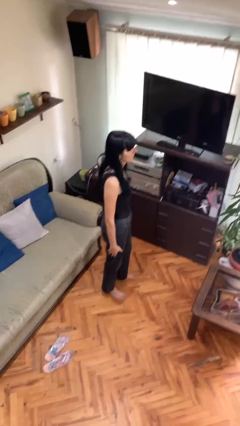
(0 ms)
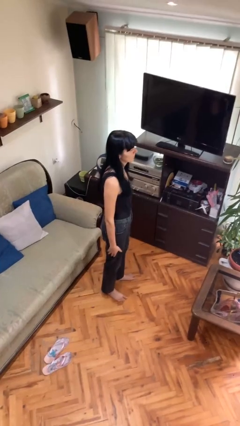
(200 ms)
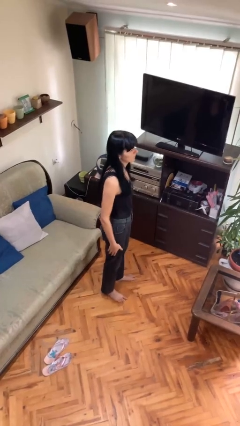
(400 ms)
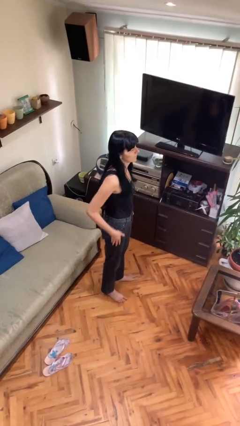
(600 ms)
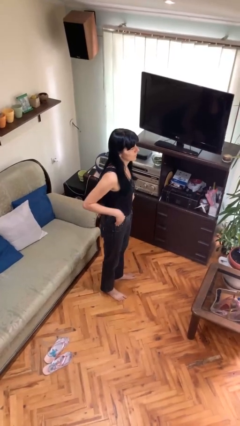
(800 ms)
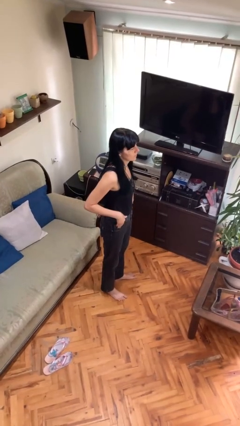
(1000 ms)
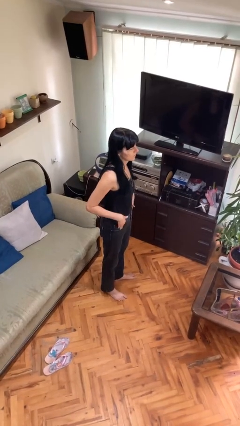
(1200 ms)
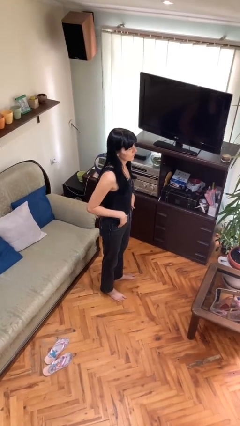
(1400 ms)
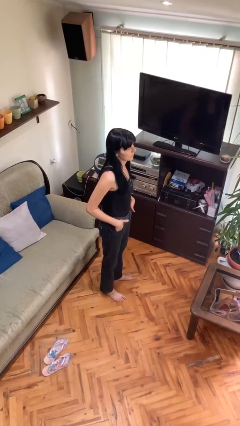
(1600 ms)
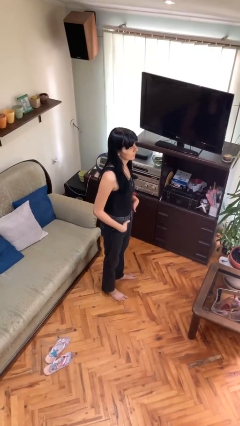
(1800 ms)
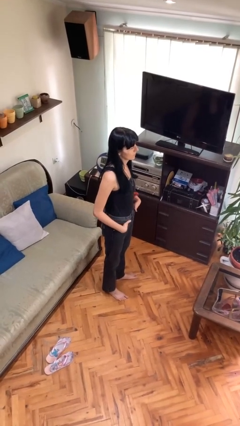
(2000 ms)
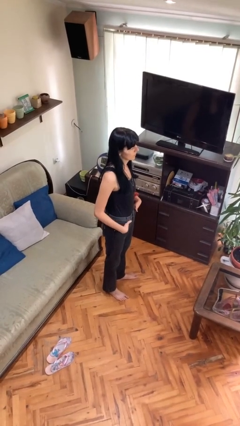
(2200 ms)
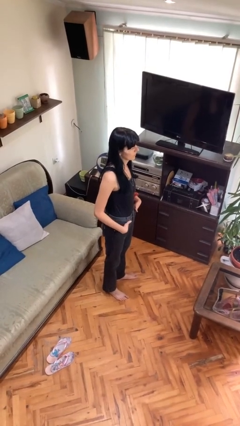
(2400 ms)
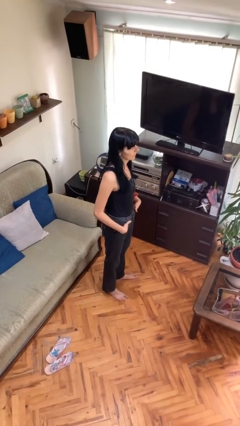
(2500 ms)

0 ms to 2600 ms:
person puts hands in back pockets

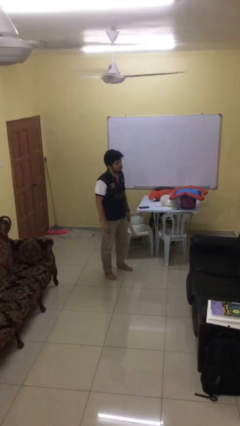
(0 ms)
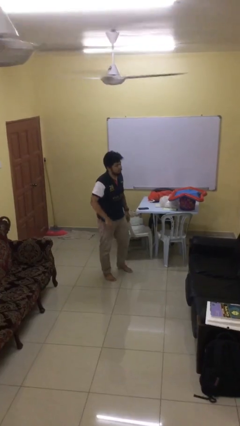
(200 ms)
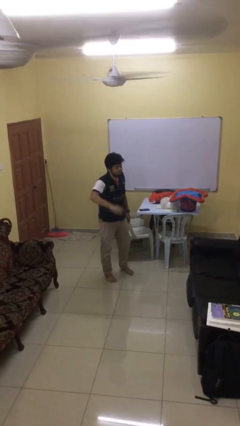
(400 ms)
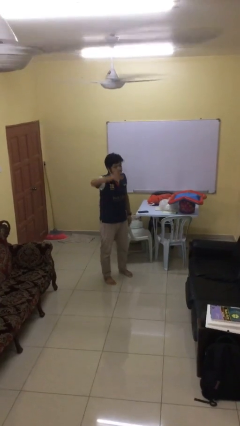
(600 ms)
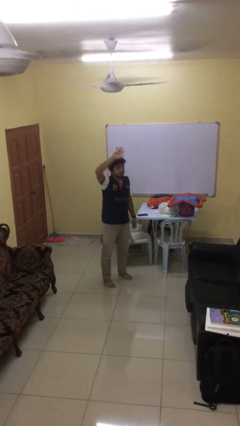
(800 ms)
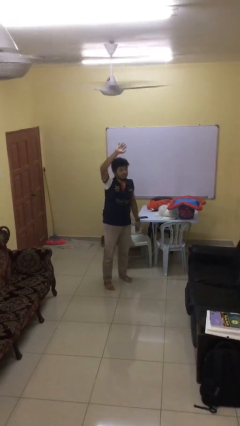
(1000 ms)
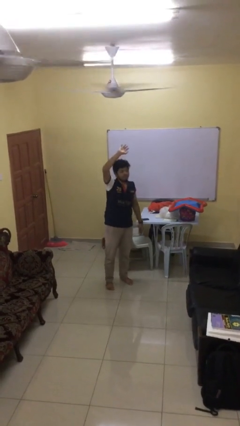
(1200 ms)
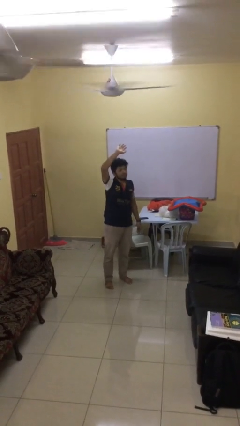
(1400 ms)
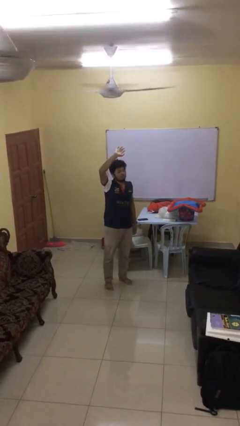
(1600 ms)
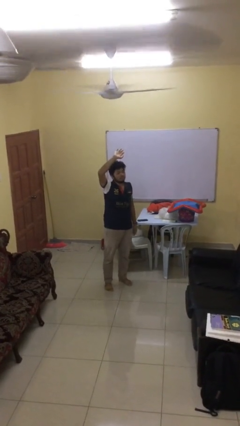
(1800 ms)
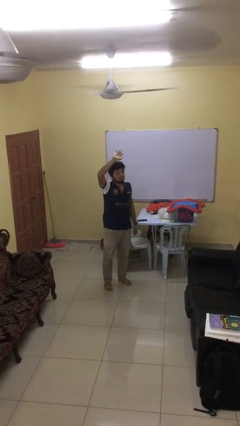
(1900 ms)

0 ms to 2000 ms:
person gestures raise hand

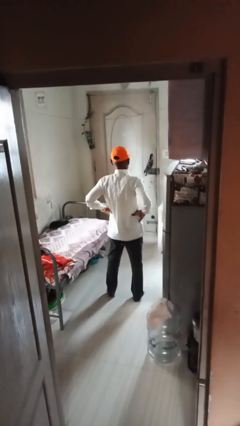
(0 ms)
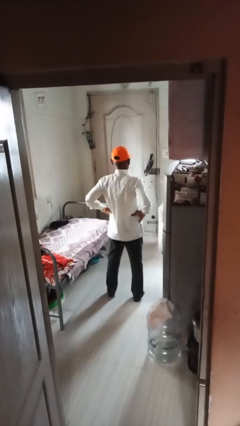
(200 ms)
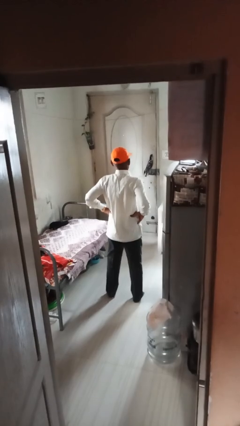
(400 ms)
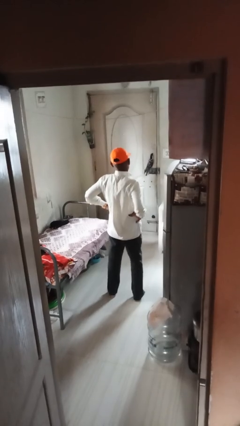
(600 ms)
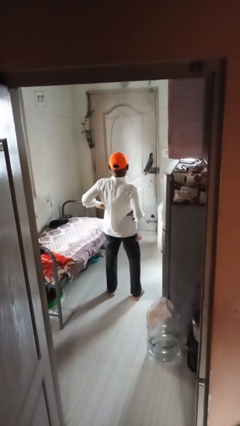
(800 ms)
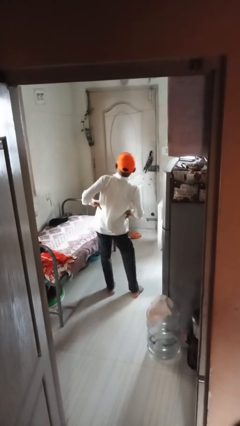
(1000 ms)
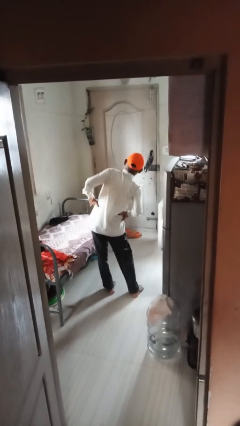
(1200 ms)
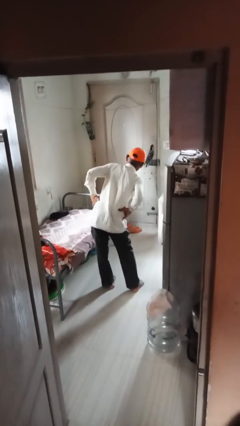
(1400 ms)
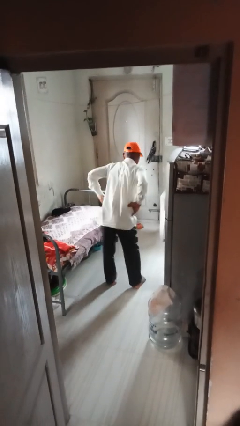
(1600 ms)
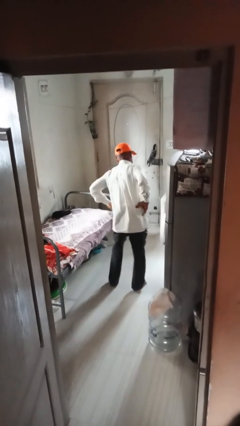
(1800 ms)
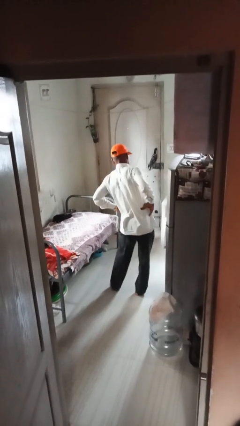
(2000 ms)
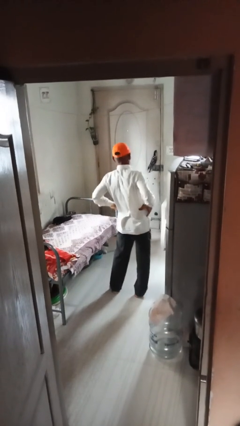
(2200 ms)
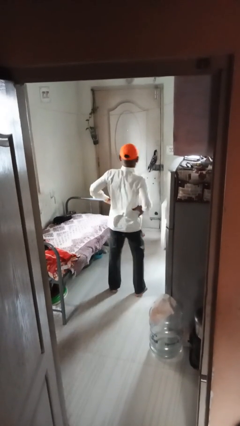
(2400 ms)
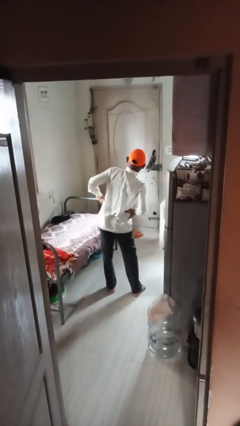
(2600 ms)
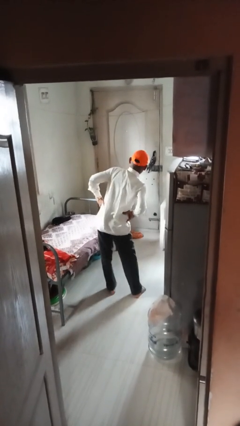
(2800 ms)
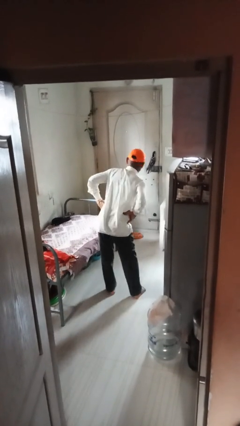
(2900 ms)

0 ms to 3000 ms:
person wiggles hips

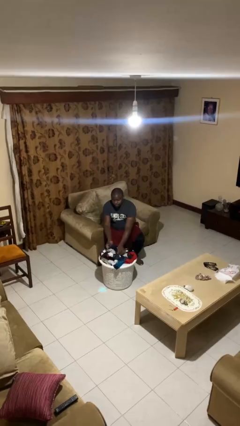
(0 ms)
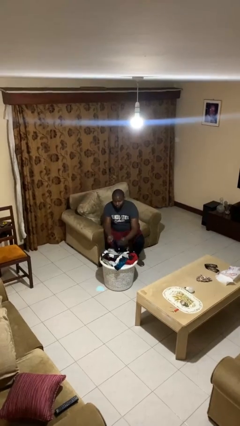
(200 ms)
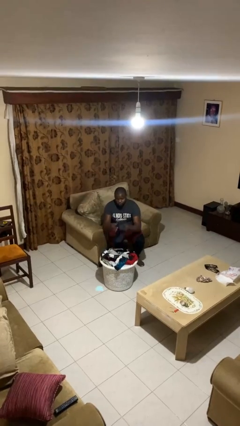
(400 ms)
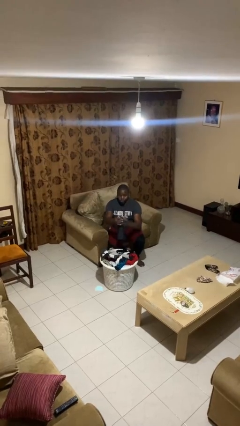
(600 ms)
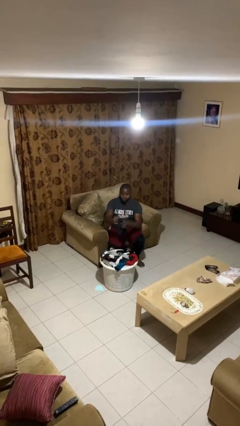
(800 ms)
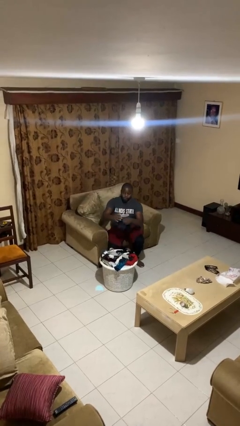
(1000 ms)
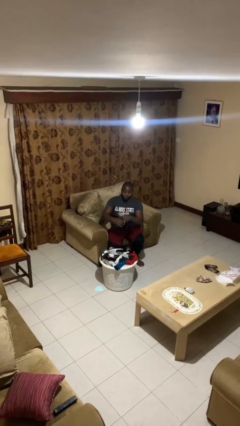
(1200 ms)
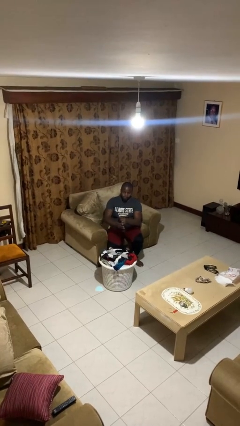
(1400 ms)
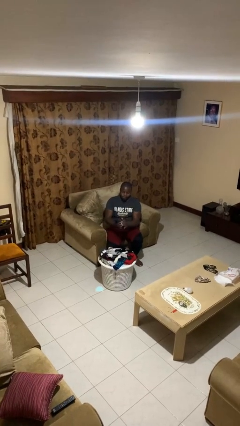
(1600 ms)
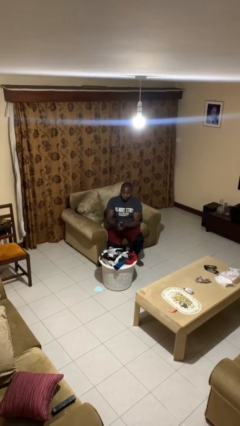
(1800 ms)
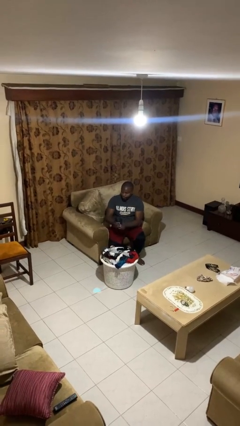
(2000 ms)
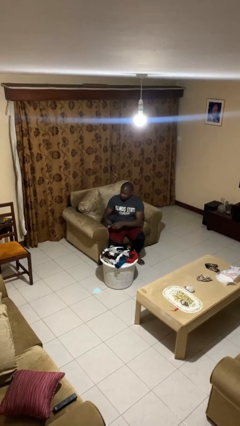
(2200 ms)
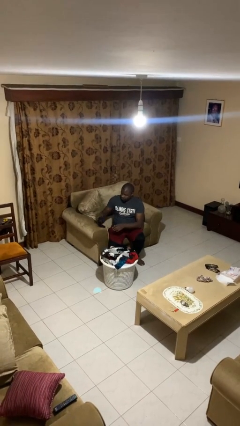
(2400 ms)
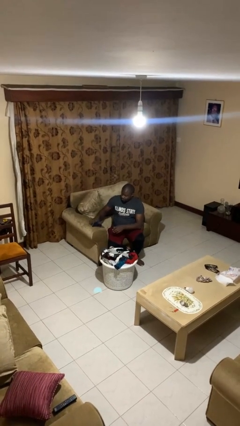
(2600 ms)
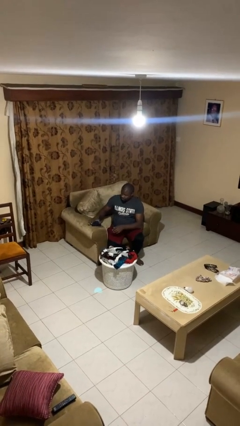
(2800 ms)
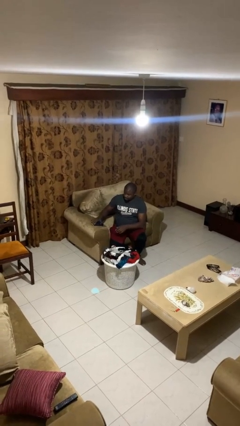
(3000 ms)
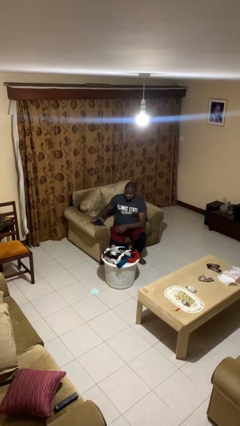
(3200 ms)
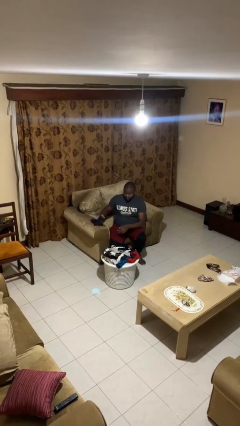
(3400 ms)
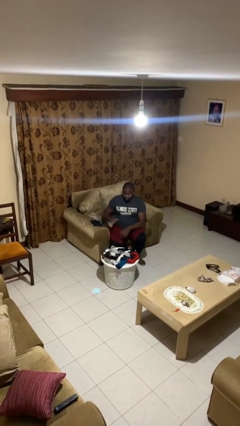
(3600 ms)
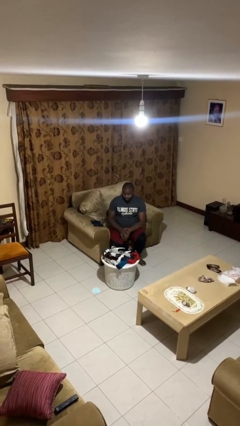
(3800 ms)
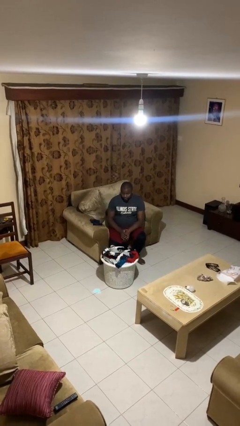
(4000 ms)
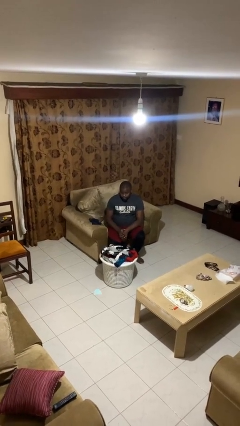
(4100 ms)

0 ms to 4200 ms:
person folds socks

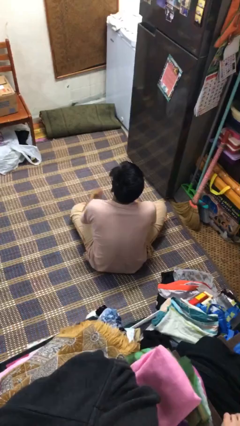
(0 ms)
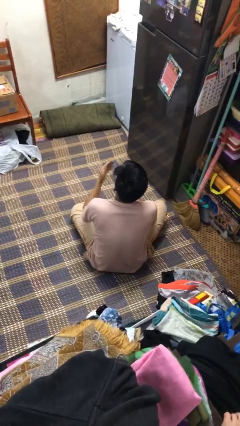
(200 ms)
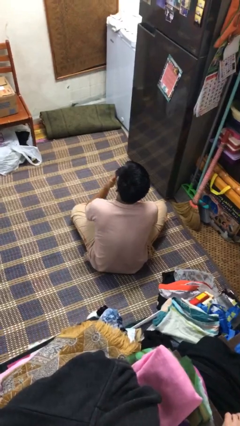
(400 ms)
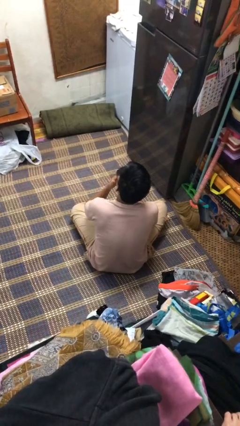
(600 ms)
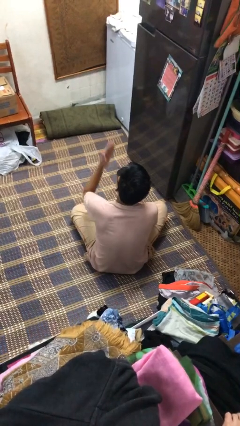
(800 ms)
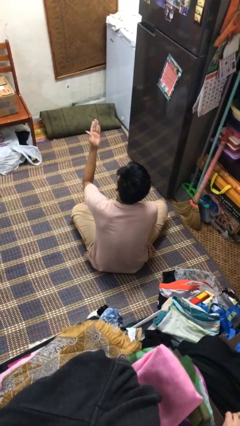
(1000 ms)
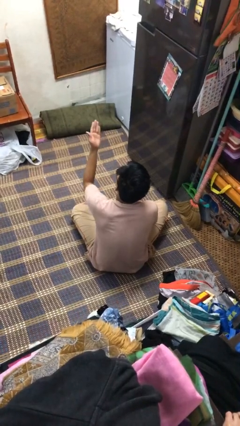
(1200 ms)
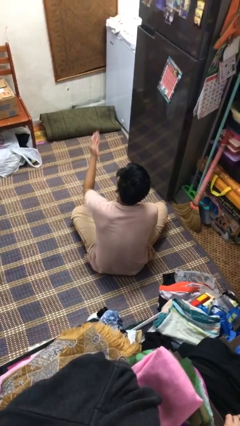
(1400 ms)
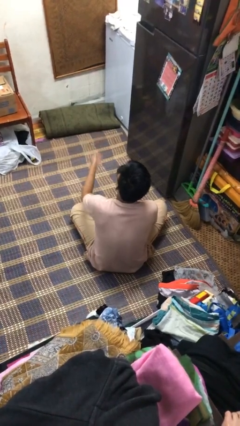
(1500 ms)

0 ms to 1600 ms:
person gestures blow kiss

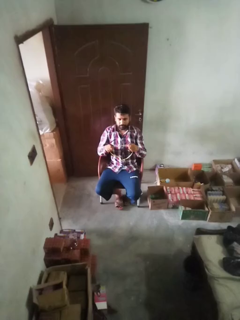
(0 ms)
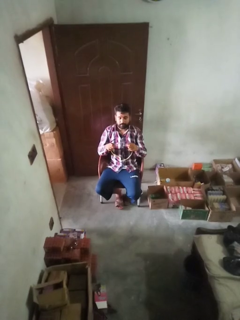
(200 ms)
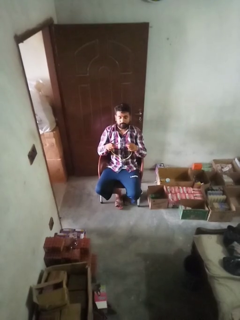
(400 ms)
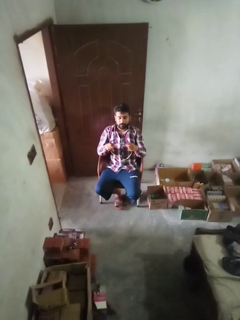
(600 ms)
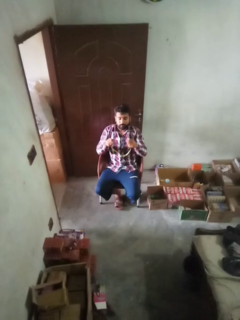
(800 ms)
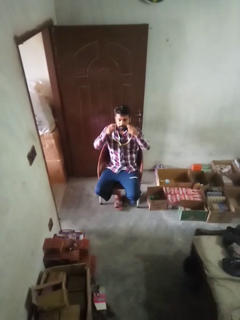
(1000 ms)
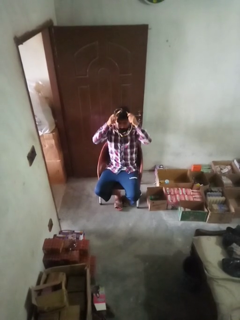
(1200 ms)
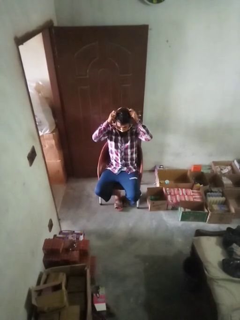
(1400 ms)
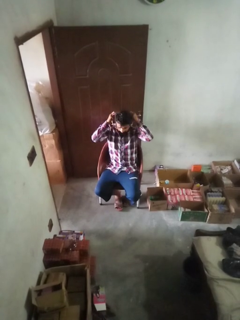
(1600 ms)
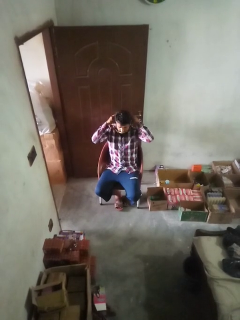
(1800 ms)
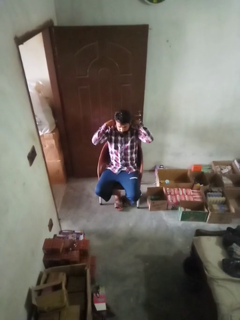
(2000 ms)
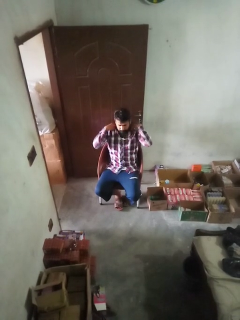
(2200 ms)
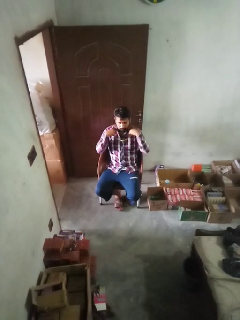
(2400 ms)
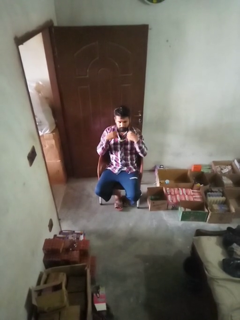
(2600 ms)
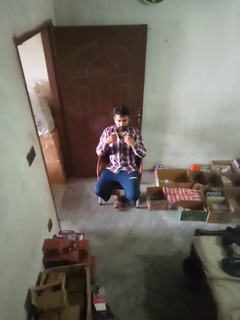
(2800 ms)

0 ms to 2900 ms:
person puts on necklace

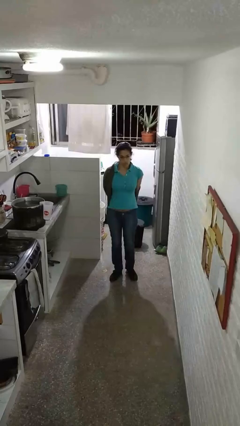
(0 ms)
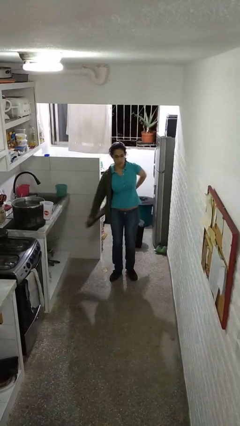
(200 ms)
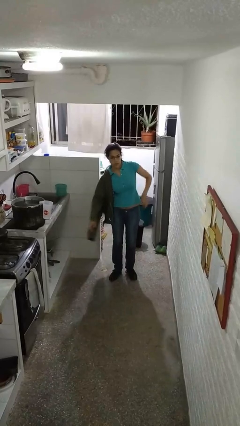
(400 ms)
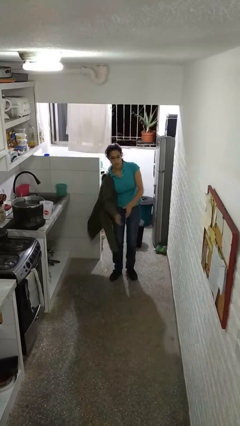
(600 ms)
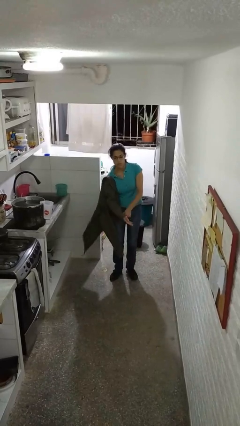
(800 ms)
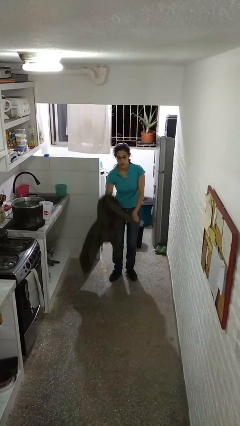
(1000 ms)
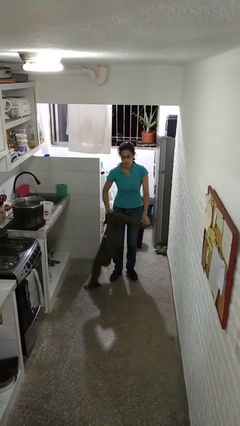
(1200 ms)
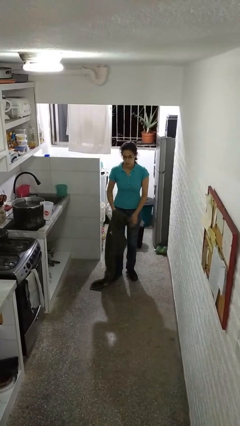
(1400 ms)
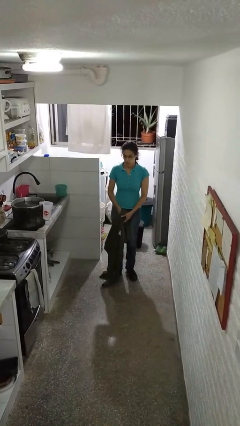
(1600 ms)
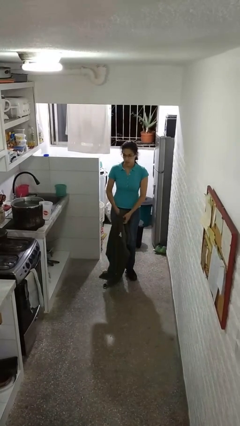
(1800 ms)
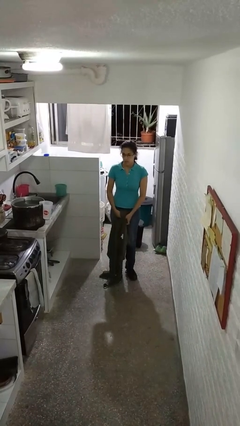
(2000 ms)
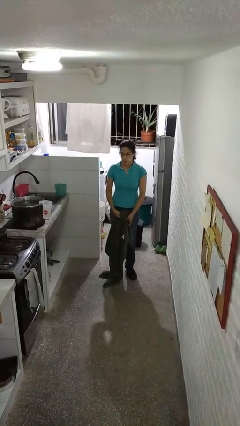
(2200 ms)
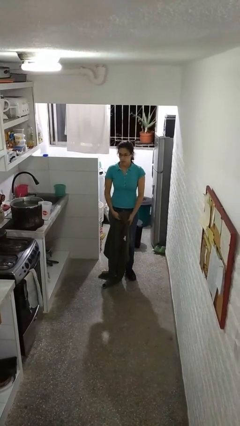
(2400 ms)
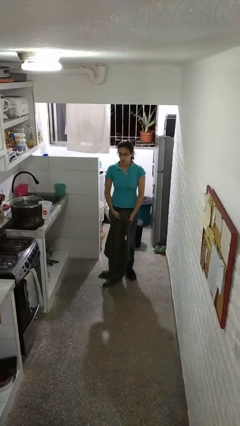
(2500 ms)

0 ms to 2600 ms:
person takes off jacket
